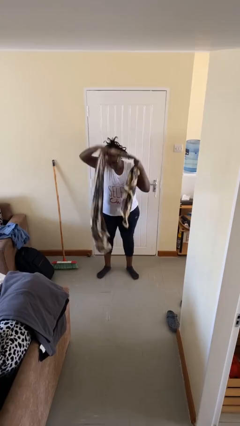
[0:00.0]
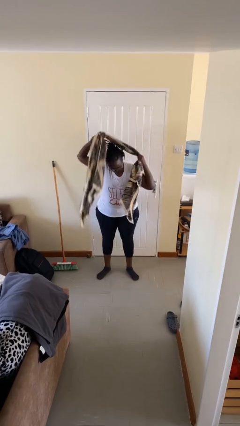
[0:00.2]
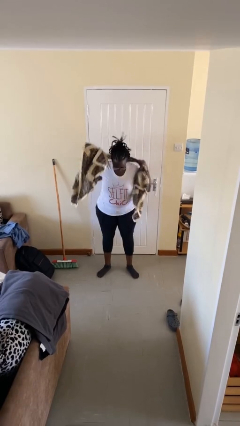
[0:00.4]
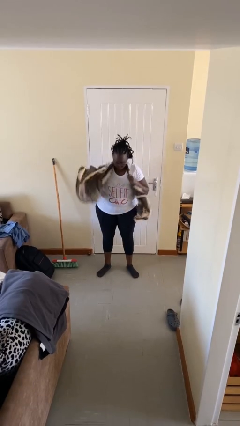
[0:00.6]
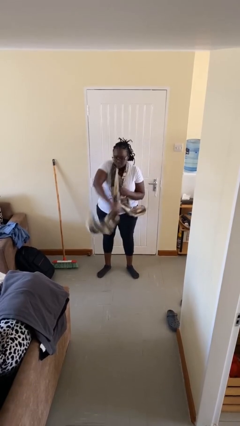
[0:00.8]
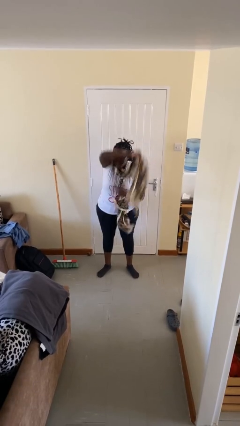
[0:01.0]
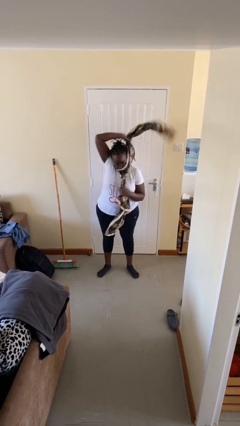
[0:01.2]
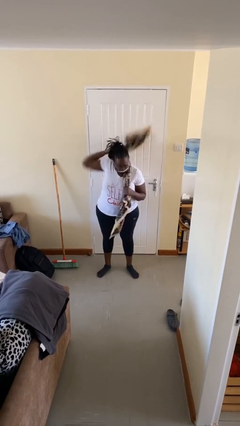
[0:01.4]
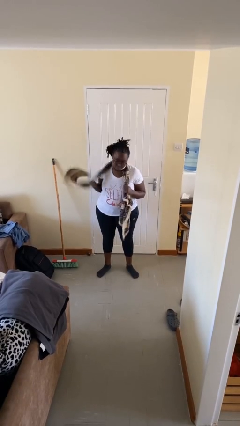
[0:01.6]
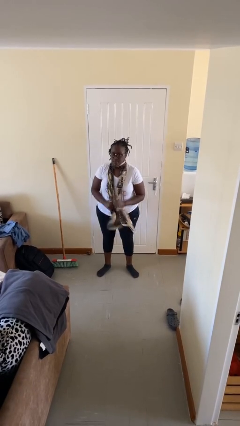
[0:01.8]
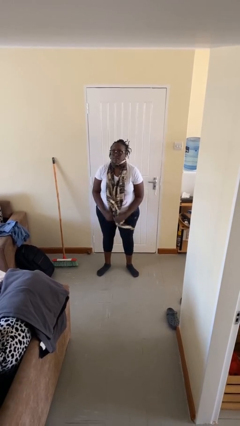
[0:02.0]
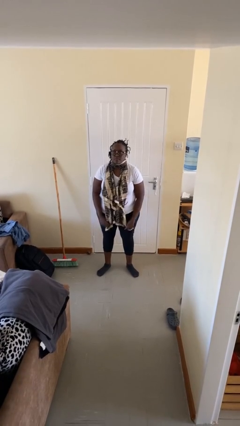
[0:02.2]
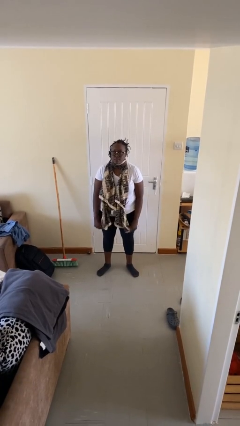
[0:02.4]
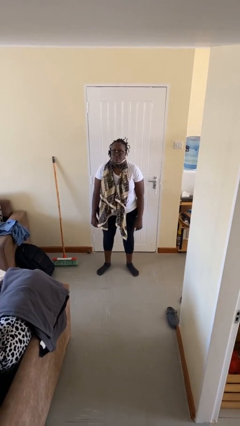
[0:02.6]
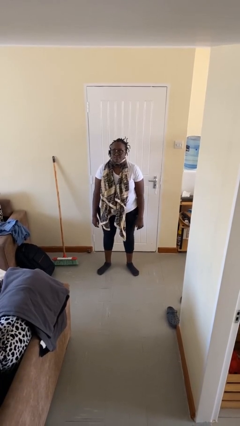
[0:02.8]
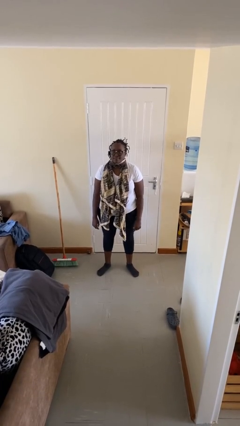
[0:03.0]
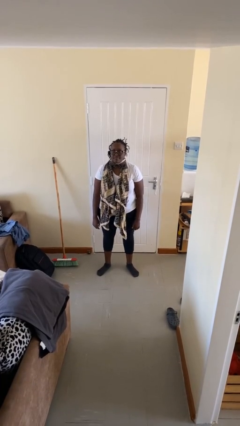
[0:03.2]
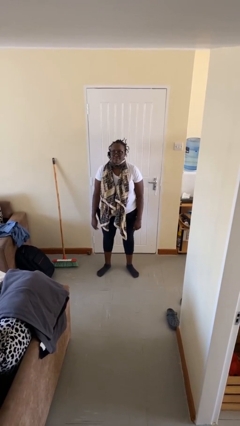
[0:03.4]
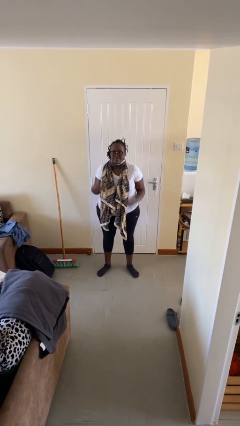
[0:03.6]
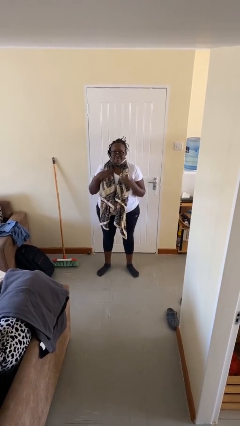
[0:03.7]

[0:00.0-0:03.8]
person puts on scarf

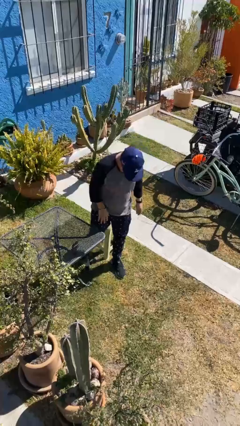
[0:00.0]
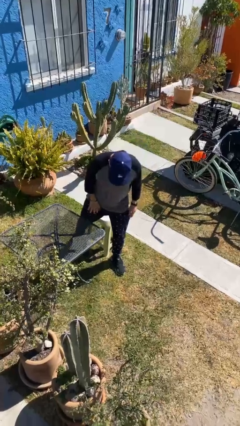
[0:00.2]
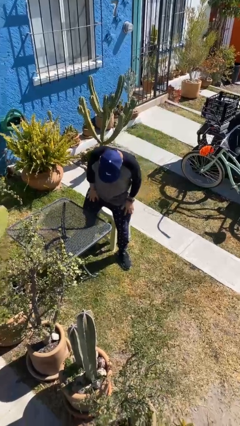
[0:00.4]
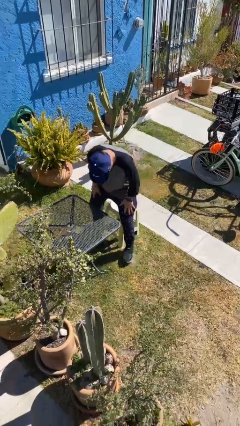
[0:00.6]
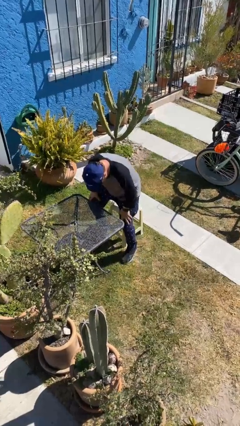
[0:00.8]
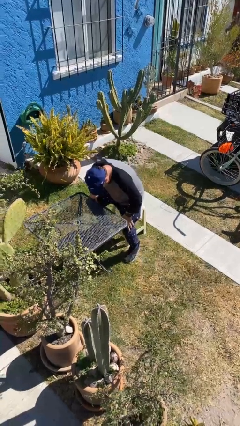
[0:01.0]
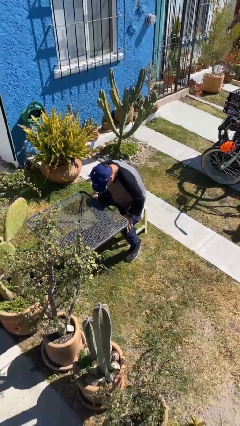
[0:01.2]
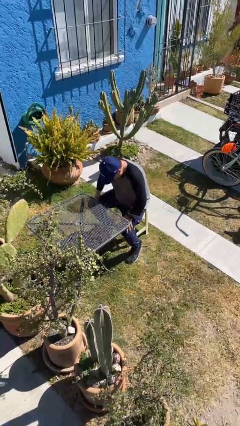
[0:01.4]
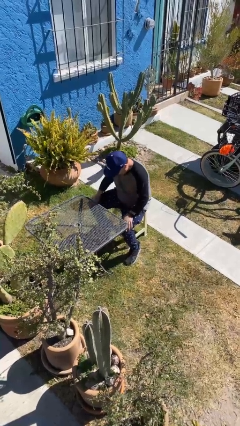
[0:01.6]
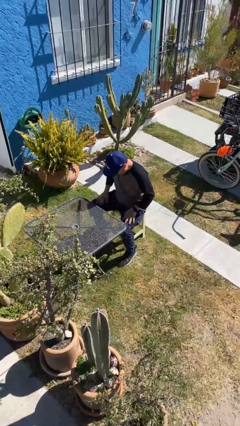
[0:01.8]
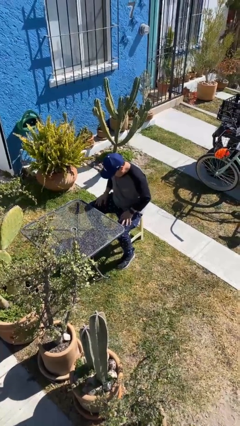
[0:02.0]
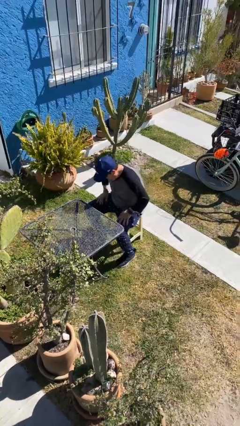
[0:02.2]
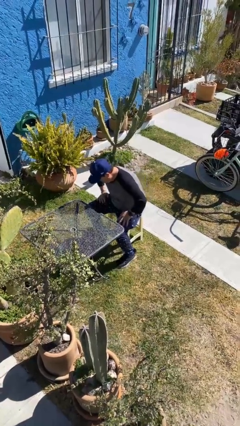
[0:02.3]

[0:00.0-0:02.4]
person sits down

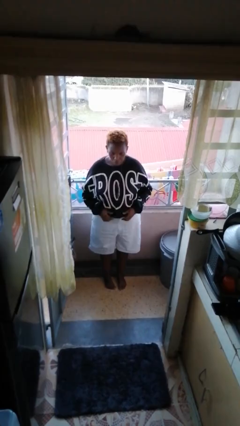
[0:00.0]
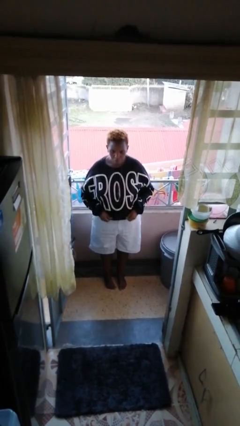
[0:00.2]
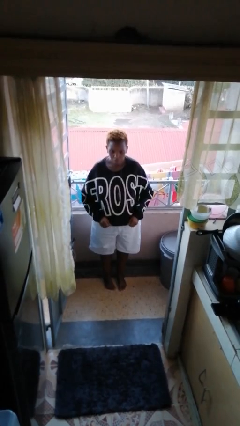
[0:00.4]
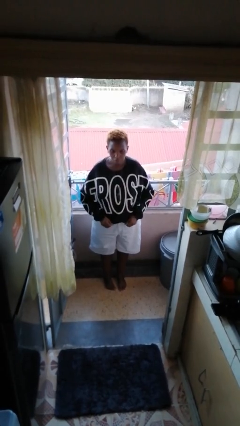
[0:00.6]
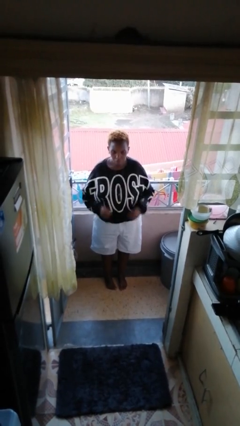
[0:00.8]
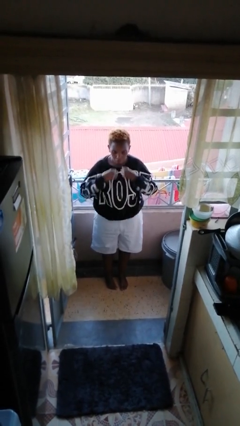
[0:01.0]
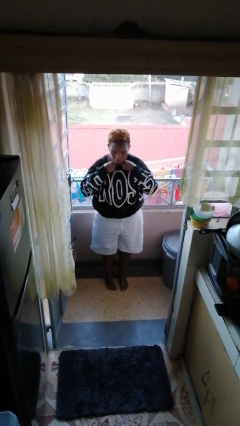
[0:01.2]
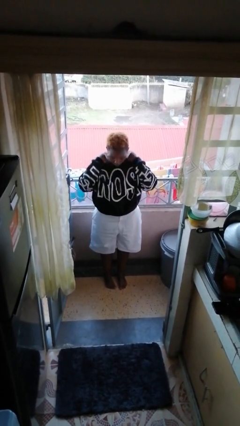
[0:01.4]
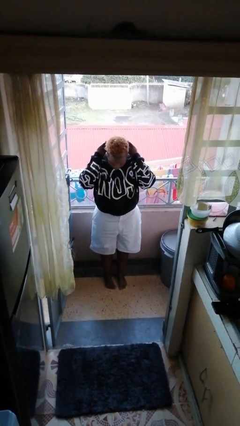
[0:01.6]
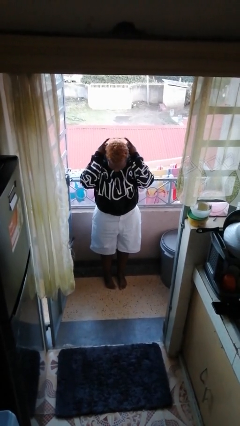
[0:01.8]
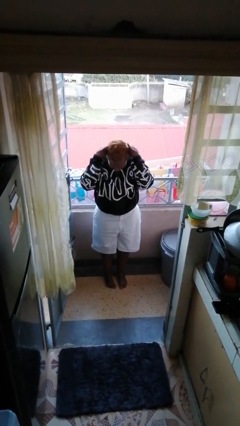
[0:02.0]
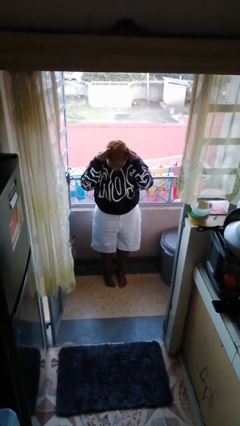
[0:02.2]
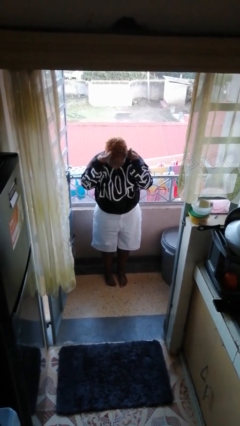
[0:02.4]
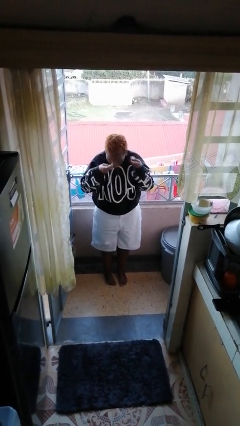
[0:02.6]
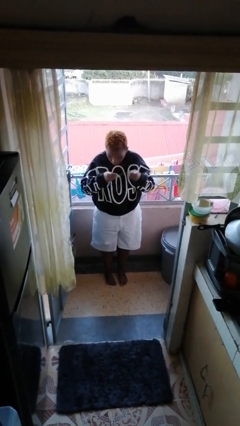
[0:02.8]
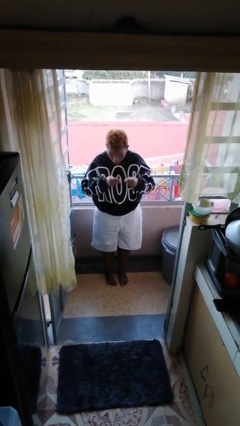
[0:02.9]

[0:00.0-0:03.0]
person takes off necklace

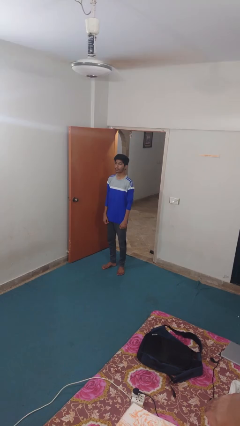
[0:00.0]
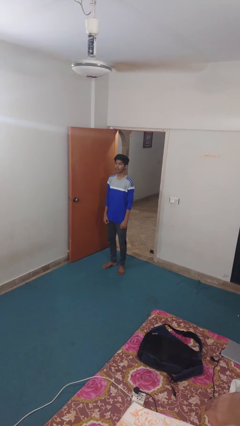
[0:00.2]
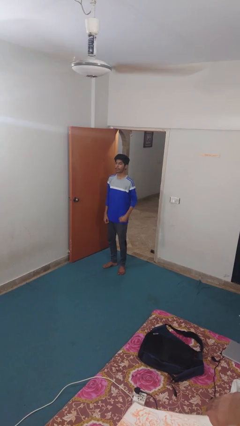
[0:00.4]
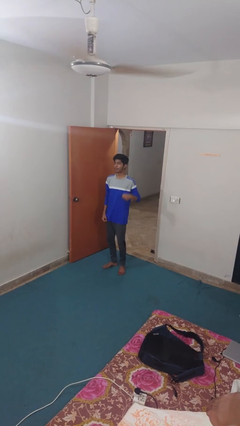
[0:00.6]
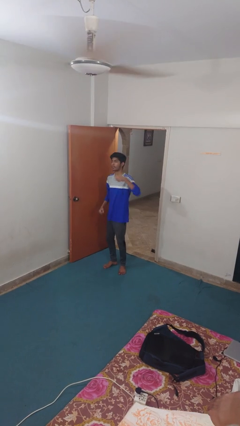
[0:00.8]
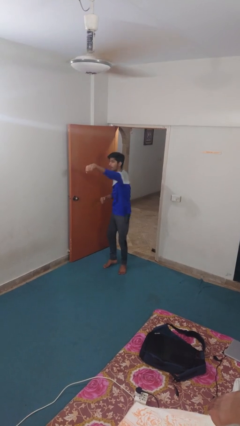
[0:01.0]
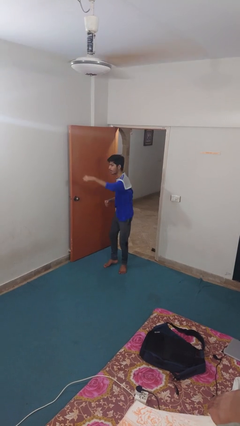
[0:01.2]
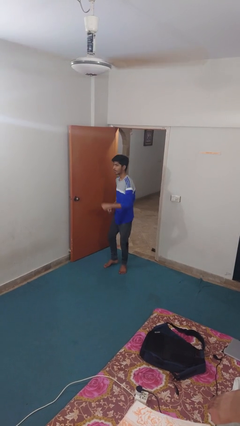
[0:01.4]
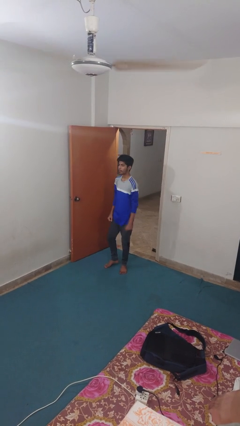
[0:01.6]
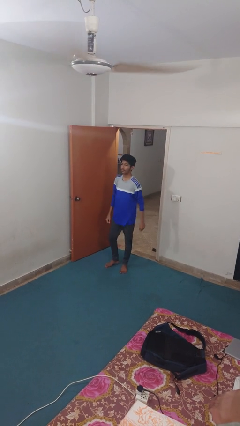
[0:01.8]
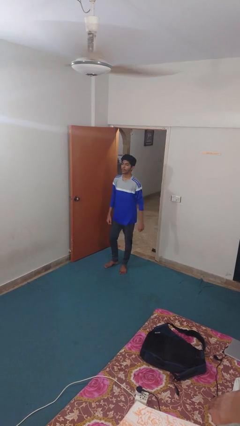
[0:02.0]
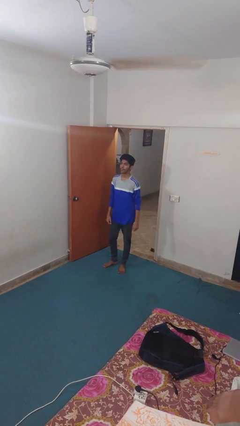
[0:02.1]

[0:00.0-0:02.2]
person punches

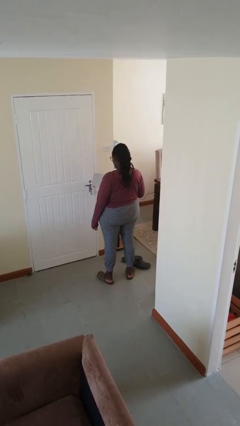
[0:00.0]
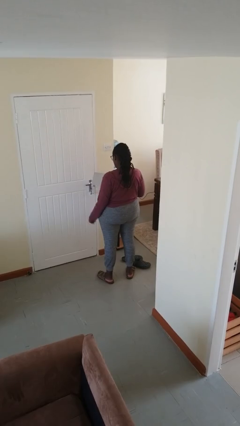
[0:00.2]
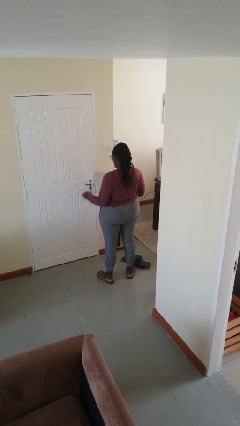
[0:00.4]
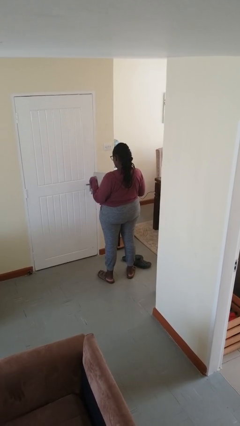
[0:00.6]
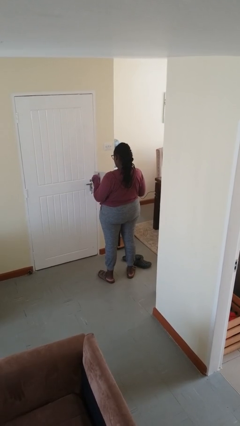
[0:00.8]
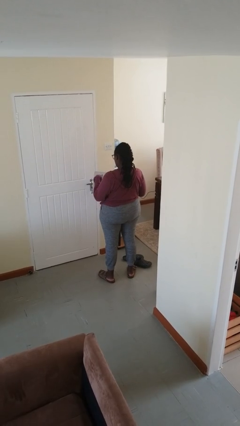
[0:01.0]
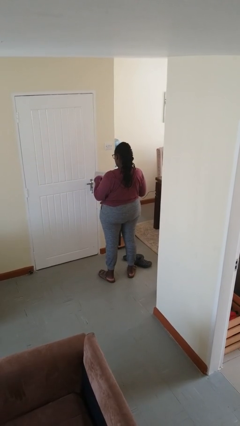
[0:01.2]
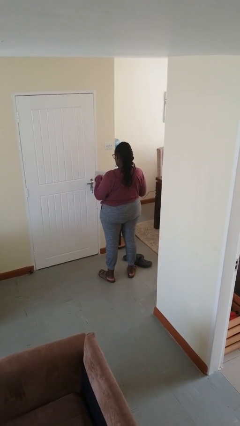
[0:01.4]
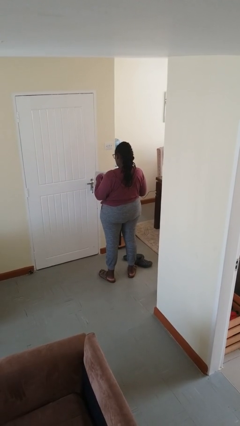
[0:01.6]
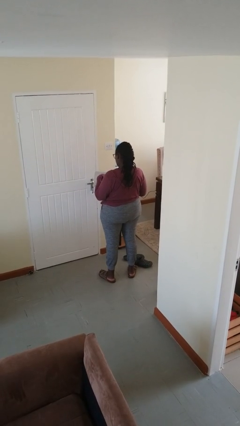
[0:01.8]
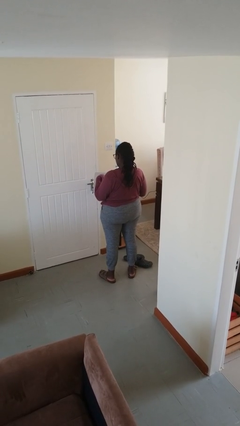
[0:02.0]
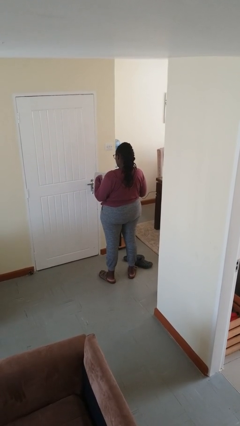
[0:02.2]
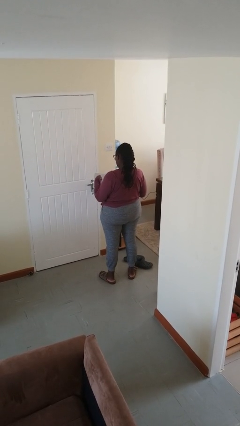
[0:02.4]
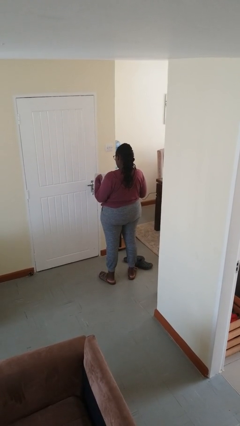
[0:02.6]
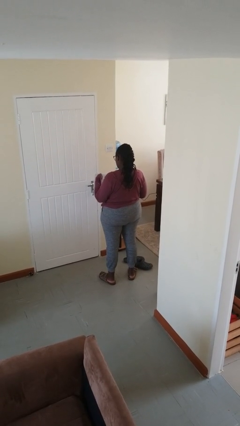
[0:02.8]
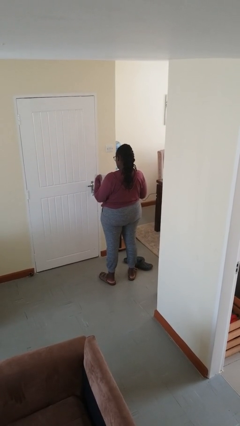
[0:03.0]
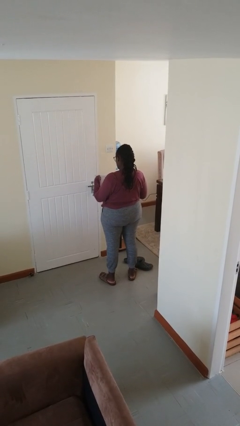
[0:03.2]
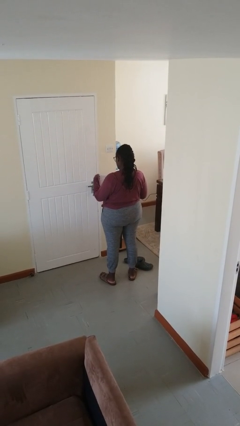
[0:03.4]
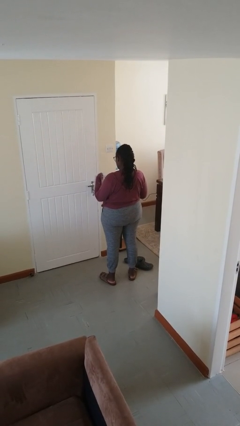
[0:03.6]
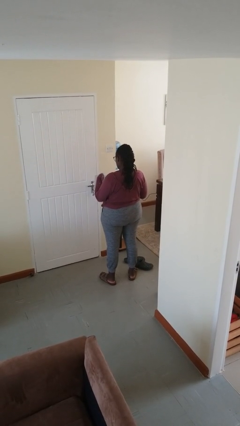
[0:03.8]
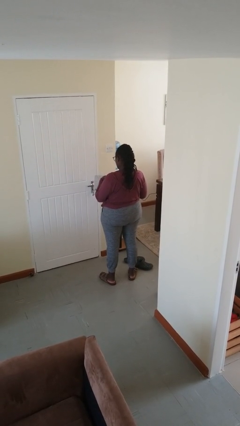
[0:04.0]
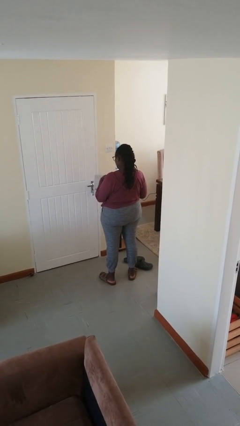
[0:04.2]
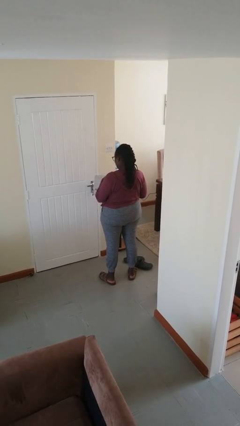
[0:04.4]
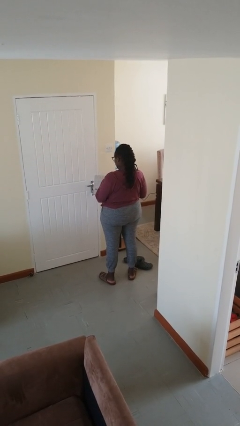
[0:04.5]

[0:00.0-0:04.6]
person taps object with finger

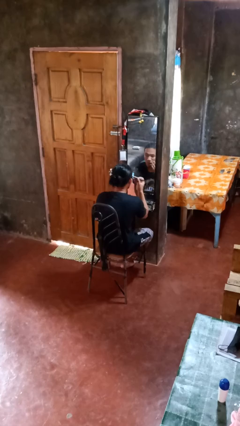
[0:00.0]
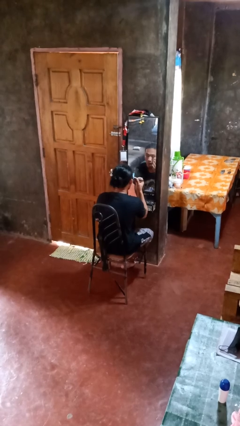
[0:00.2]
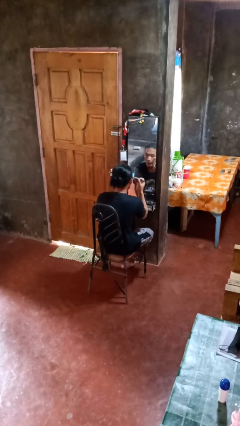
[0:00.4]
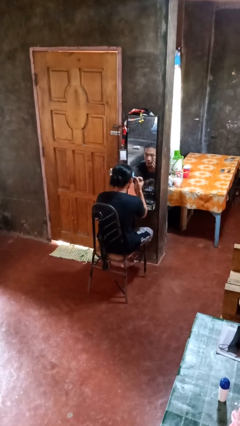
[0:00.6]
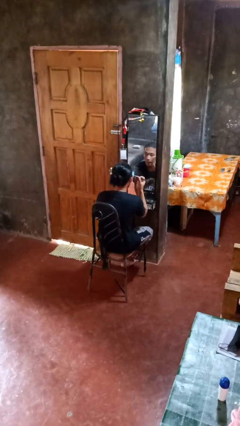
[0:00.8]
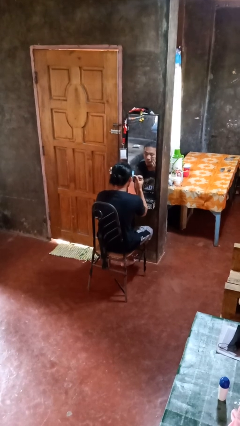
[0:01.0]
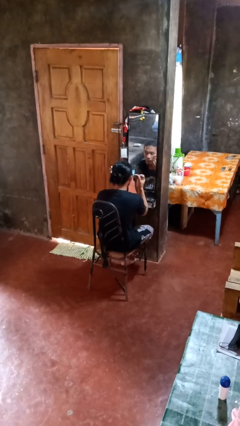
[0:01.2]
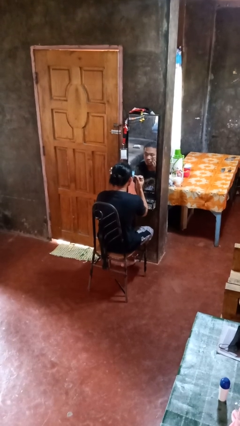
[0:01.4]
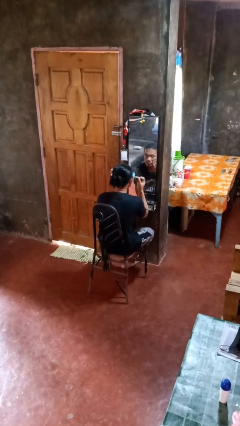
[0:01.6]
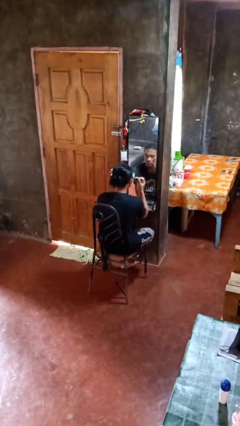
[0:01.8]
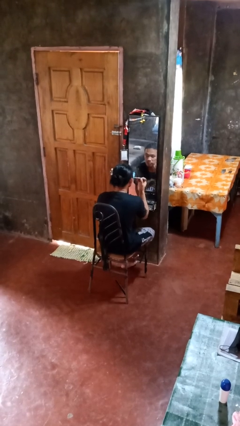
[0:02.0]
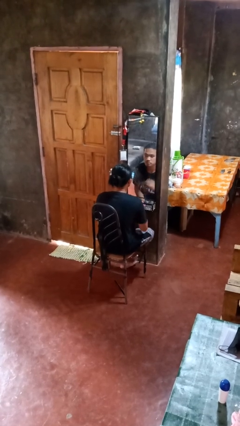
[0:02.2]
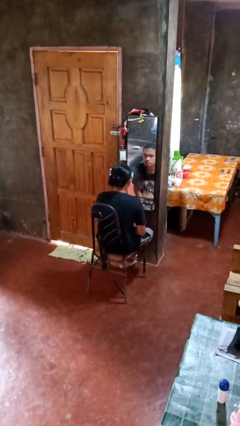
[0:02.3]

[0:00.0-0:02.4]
person applies eye makeup
